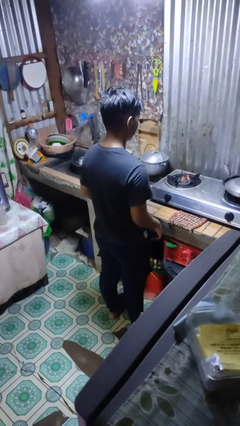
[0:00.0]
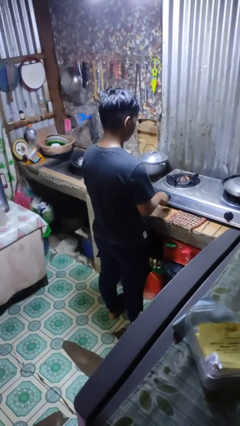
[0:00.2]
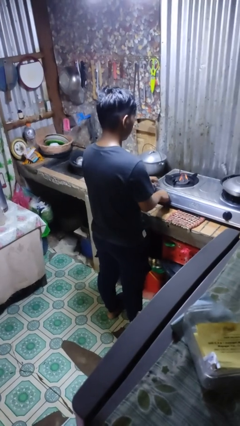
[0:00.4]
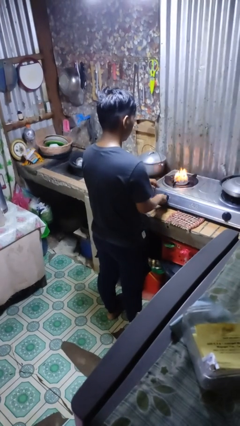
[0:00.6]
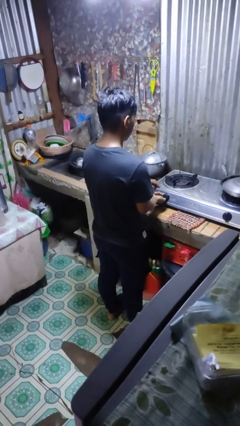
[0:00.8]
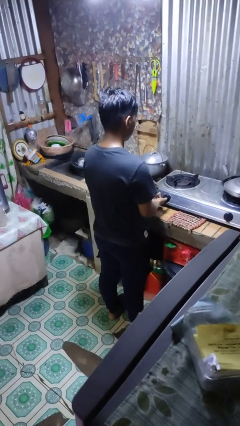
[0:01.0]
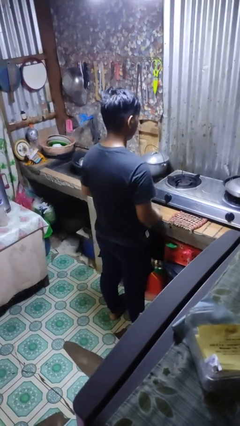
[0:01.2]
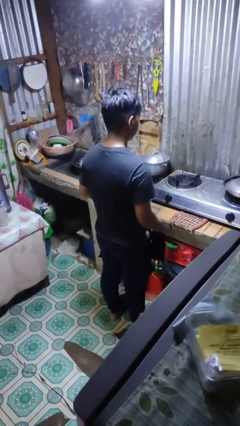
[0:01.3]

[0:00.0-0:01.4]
person turns off stovetop

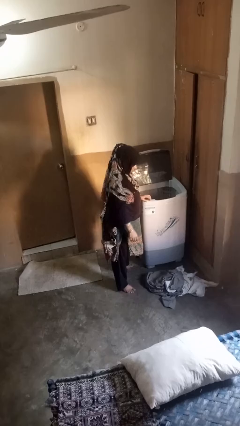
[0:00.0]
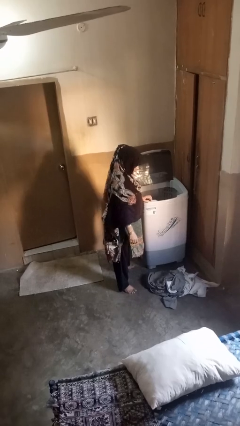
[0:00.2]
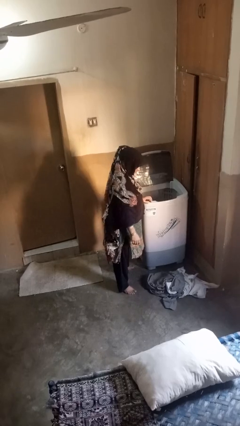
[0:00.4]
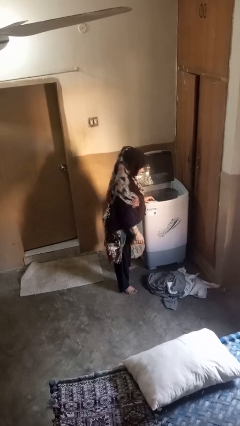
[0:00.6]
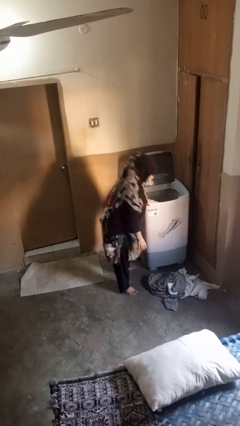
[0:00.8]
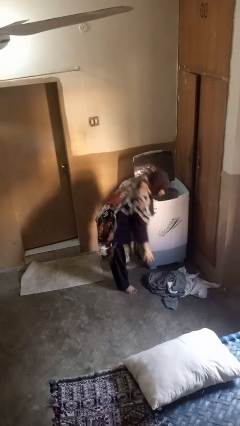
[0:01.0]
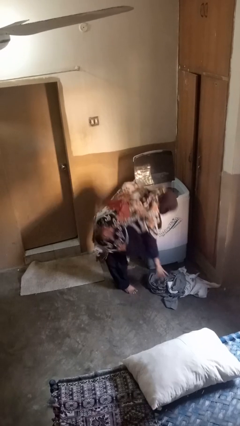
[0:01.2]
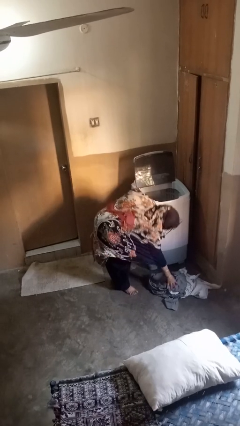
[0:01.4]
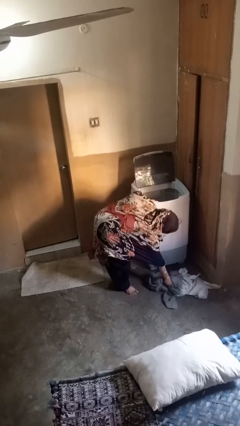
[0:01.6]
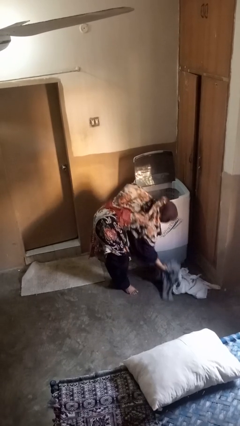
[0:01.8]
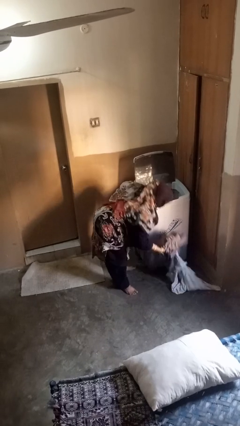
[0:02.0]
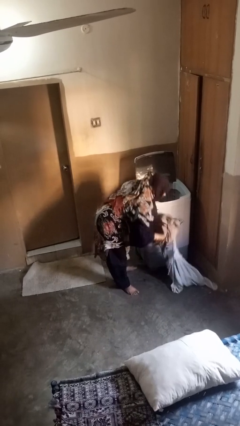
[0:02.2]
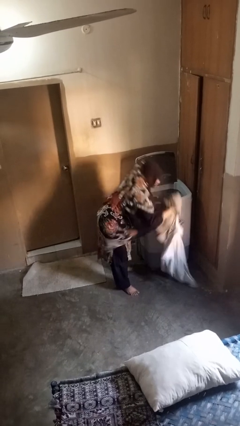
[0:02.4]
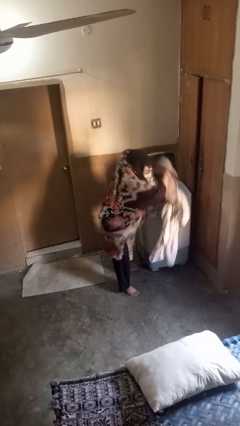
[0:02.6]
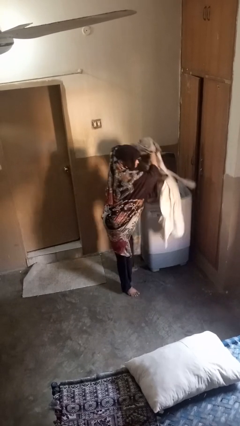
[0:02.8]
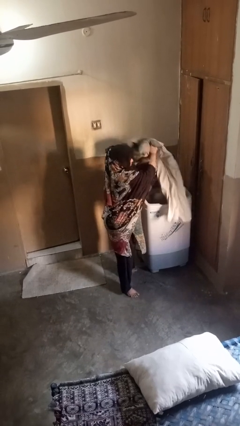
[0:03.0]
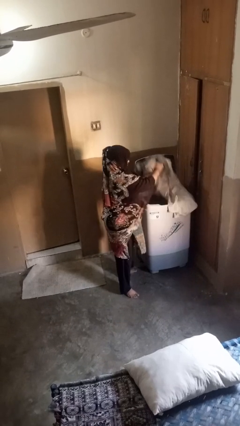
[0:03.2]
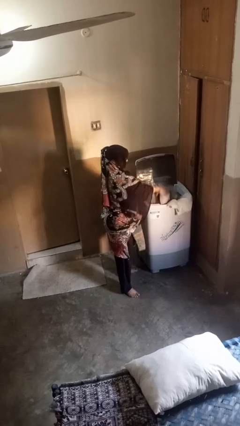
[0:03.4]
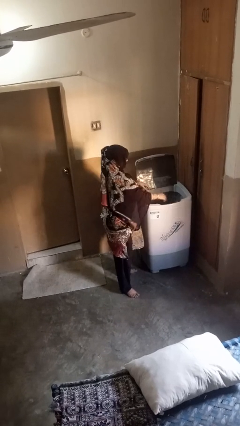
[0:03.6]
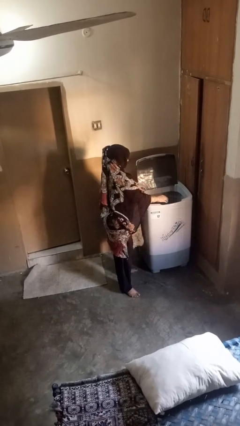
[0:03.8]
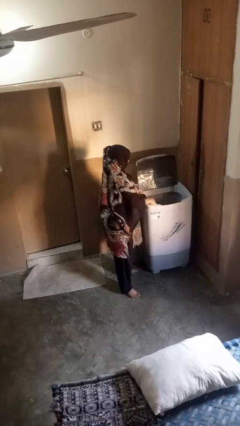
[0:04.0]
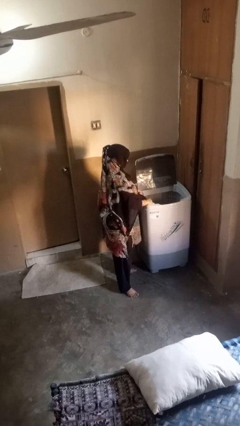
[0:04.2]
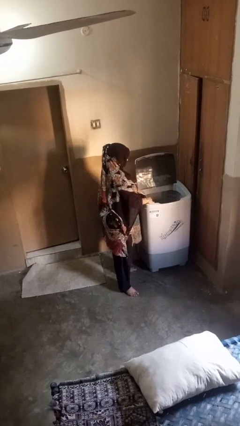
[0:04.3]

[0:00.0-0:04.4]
person loads clotheswasher

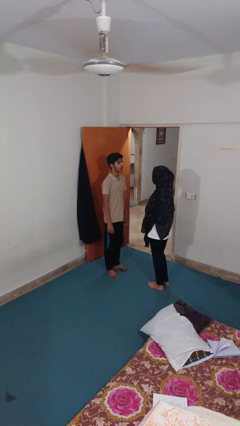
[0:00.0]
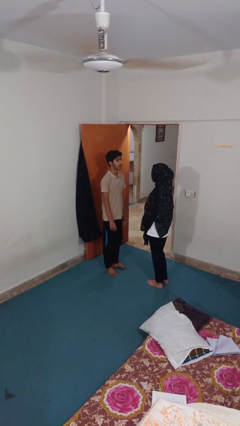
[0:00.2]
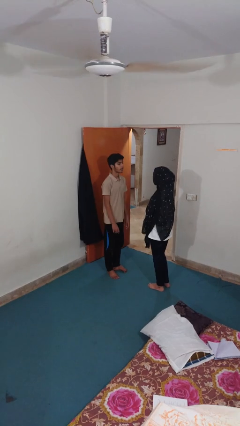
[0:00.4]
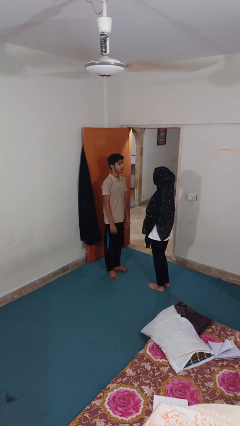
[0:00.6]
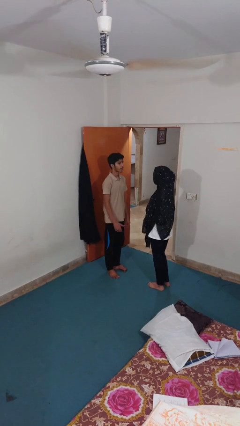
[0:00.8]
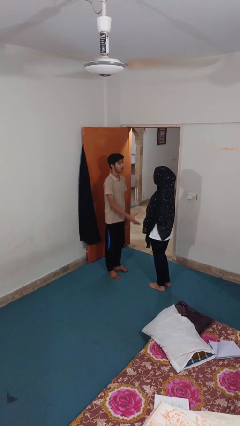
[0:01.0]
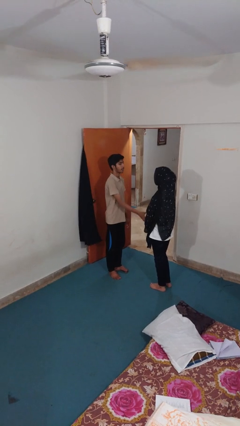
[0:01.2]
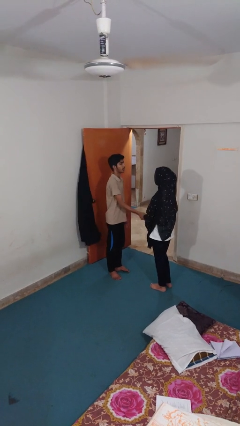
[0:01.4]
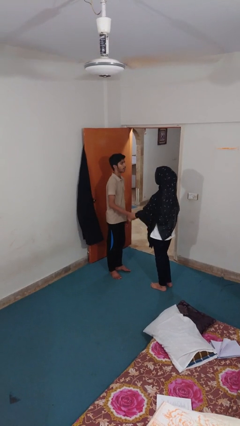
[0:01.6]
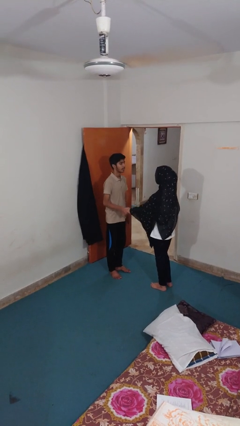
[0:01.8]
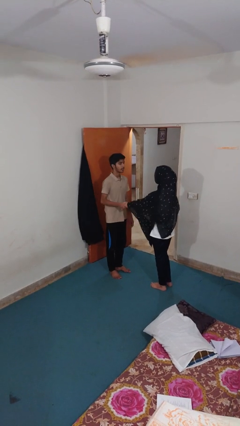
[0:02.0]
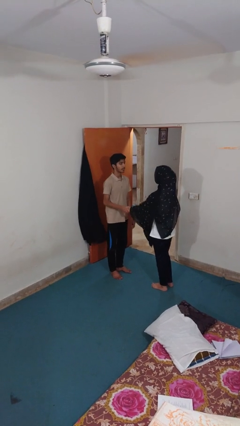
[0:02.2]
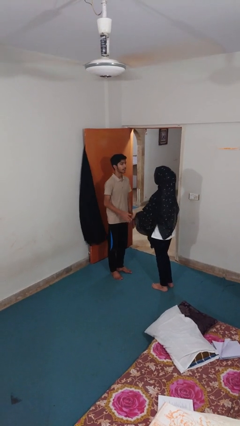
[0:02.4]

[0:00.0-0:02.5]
person grabs person by forearm

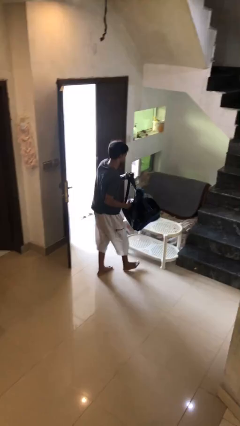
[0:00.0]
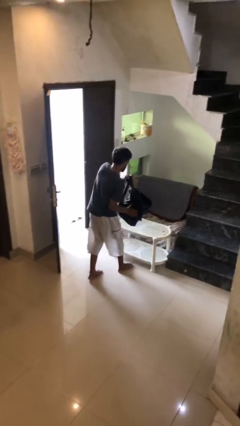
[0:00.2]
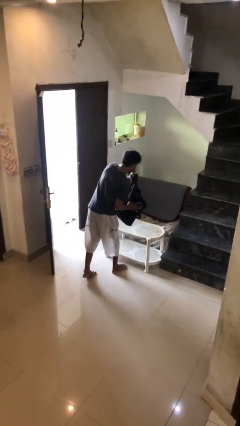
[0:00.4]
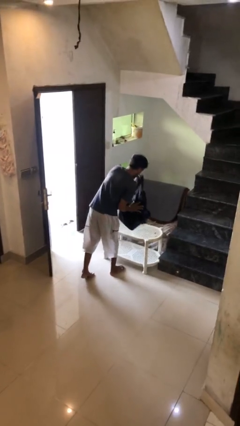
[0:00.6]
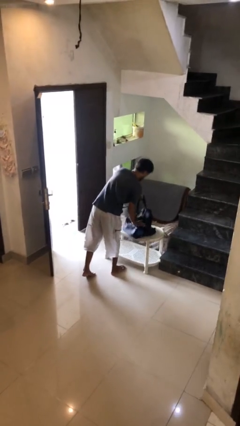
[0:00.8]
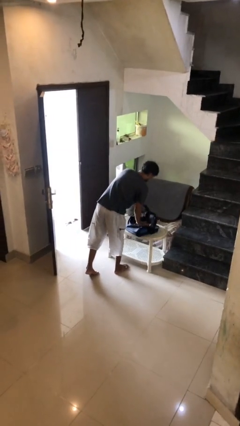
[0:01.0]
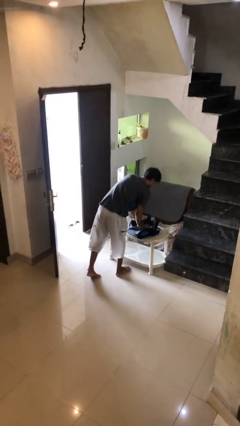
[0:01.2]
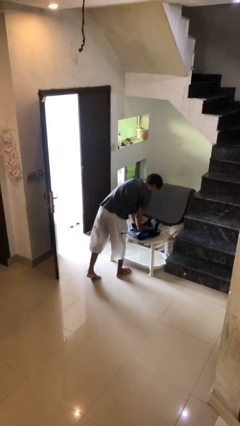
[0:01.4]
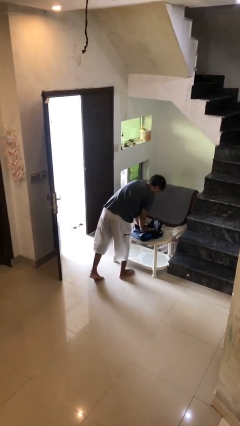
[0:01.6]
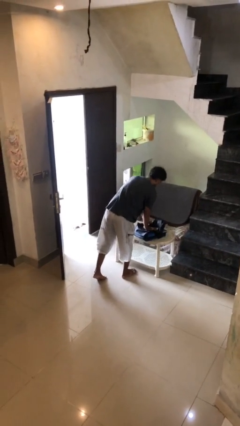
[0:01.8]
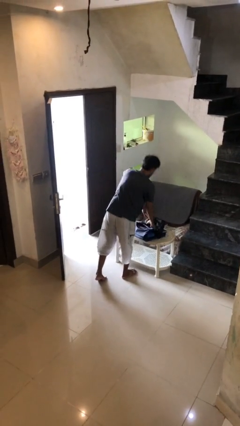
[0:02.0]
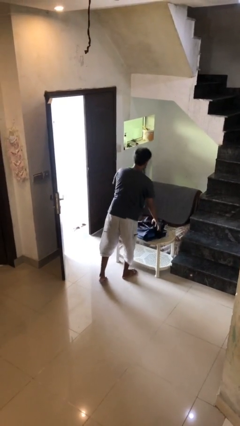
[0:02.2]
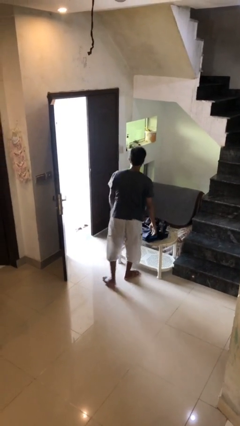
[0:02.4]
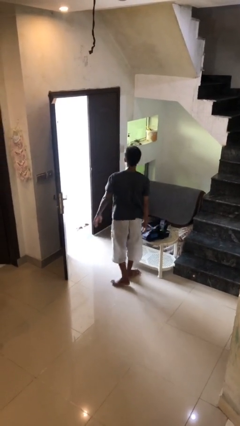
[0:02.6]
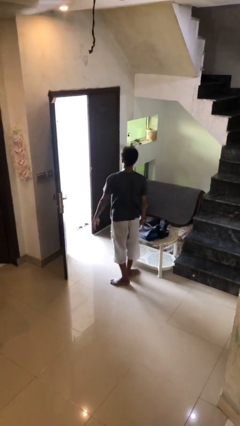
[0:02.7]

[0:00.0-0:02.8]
person puts down object on table

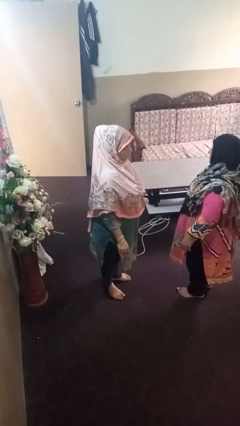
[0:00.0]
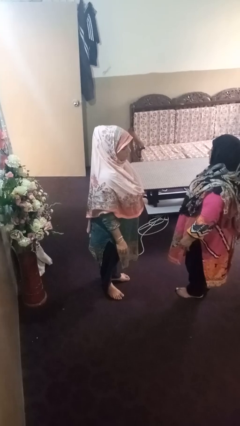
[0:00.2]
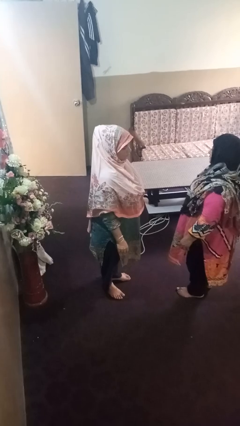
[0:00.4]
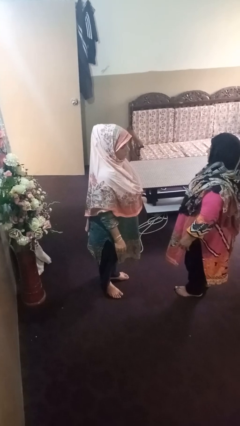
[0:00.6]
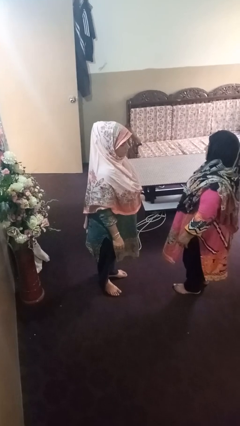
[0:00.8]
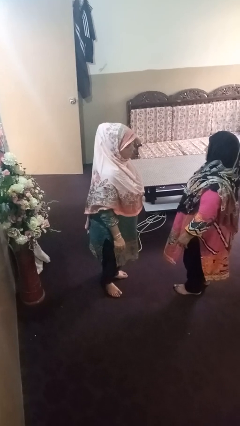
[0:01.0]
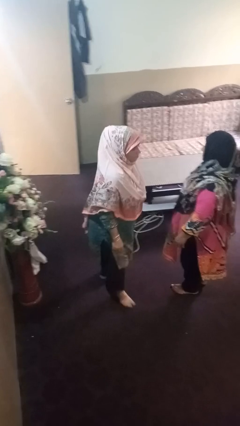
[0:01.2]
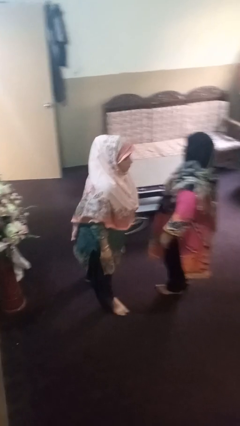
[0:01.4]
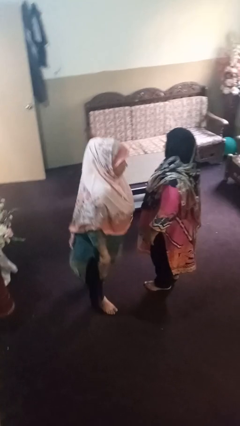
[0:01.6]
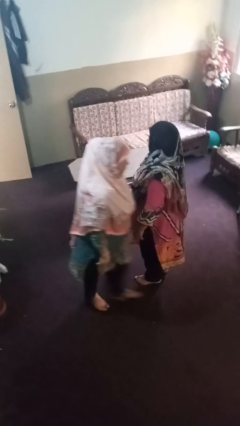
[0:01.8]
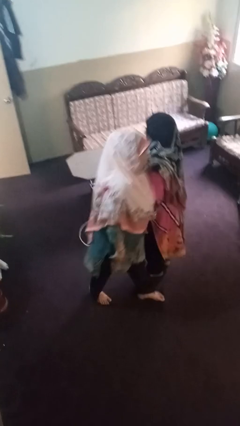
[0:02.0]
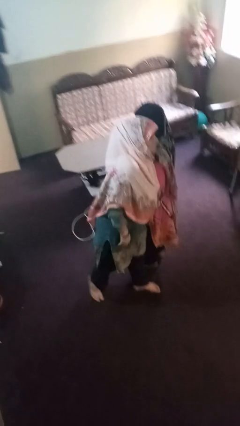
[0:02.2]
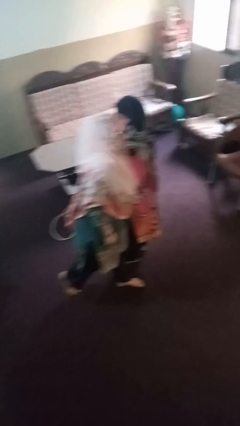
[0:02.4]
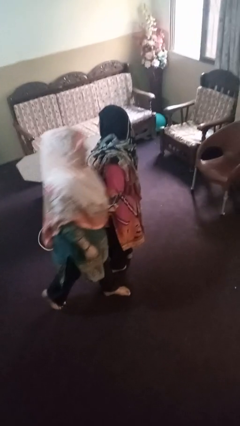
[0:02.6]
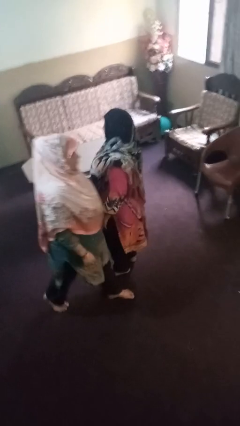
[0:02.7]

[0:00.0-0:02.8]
person shoves person

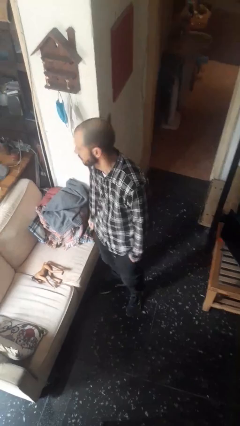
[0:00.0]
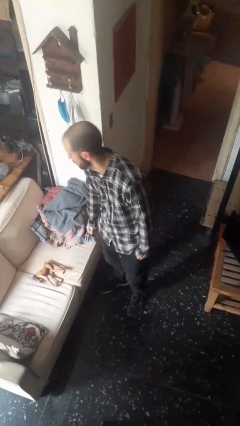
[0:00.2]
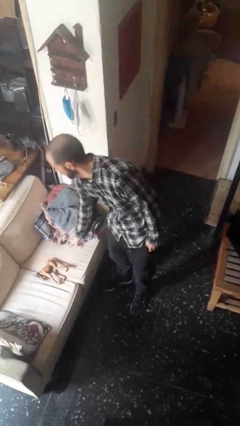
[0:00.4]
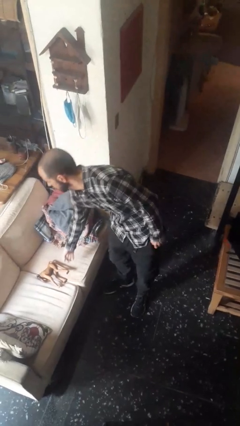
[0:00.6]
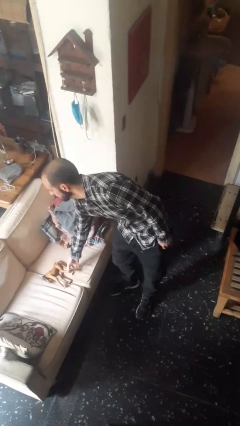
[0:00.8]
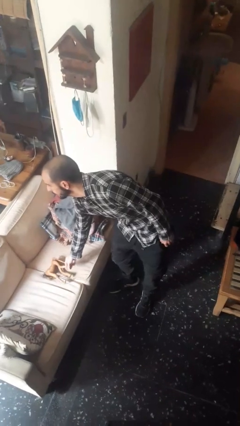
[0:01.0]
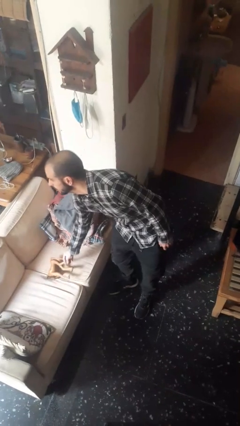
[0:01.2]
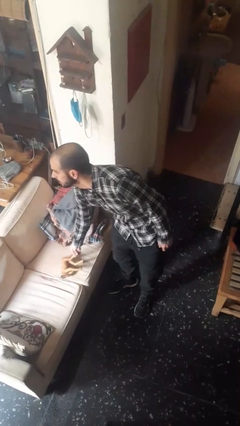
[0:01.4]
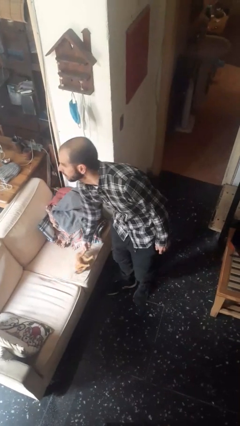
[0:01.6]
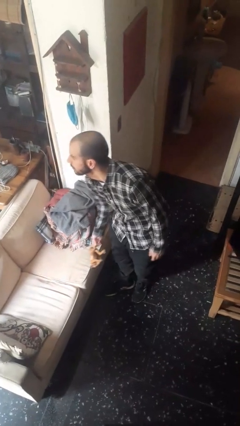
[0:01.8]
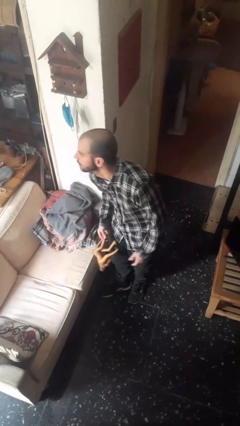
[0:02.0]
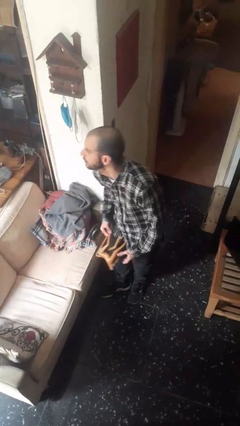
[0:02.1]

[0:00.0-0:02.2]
person picks up object from couch

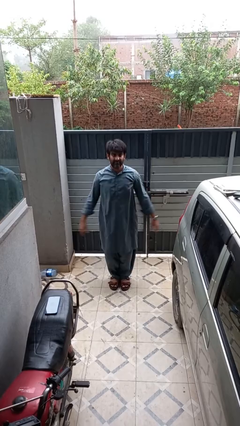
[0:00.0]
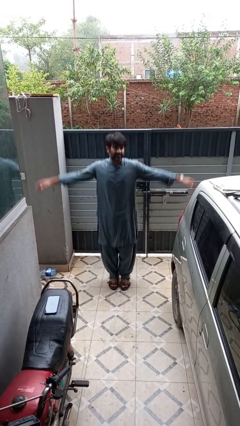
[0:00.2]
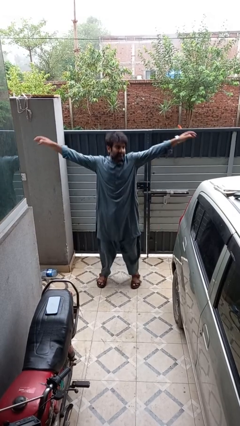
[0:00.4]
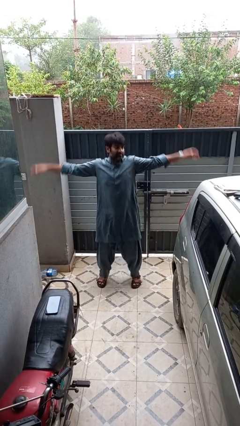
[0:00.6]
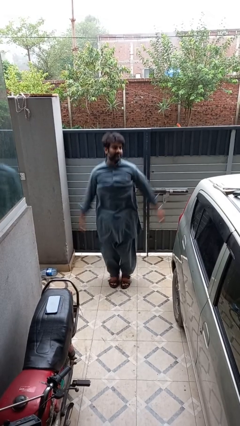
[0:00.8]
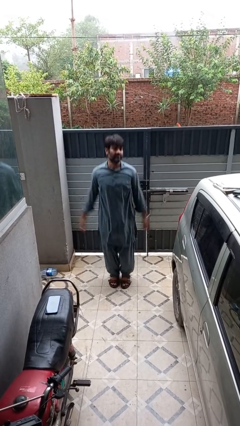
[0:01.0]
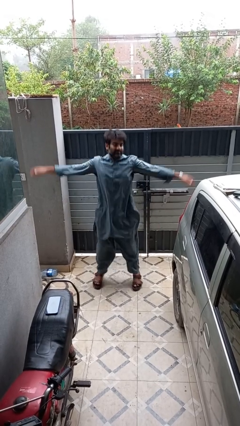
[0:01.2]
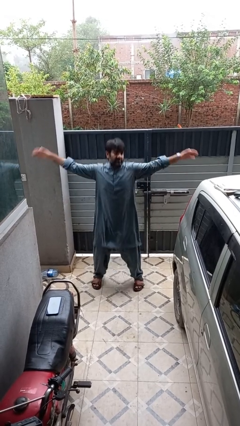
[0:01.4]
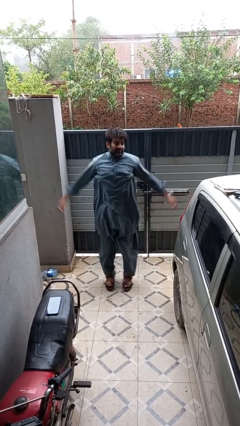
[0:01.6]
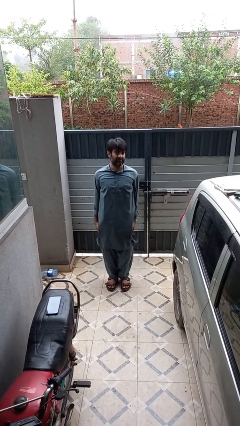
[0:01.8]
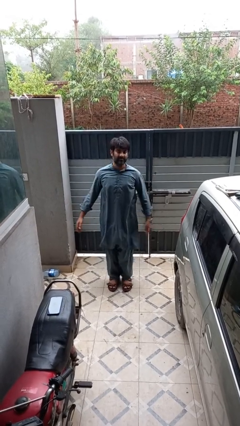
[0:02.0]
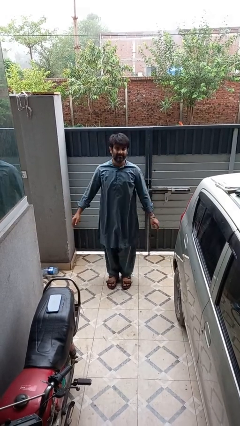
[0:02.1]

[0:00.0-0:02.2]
person exercises with jumping jacks
